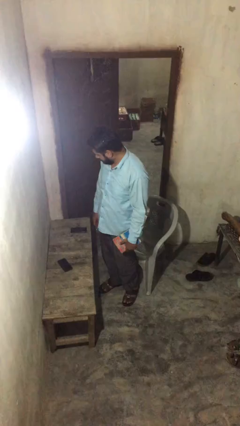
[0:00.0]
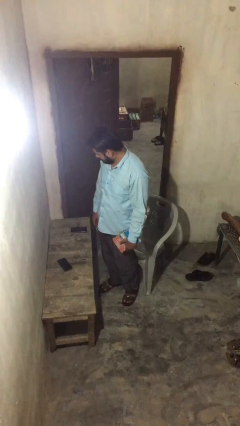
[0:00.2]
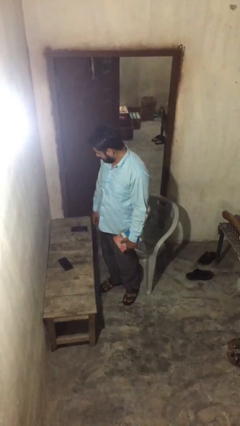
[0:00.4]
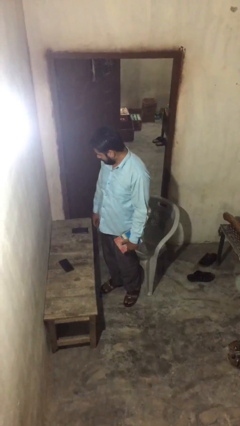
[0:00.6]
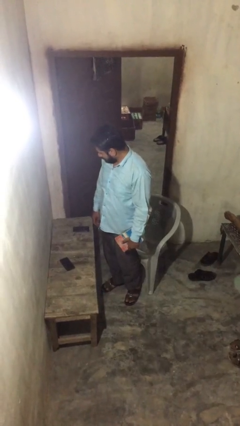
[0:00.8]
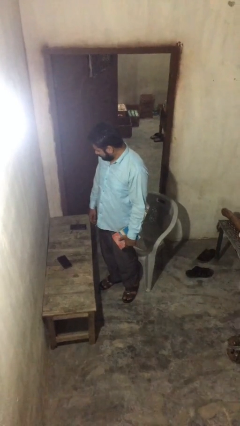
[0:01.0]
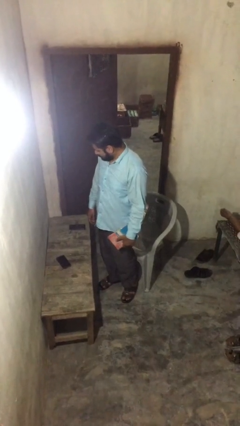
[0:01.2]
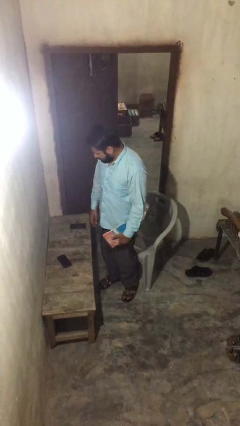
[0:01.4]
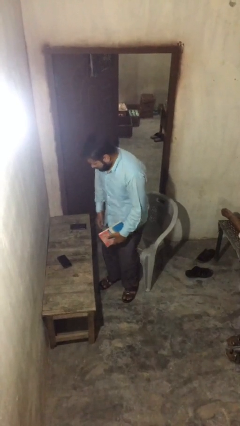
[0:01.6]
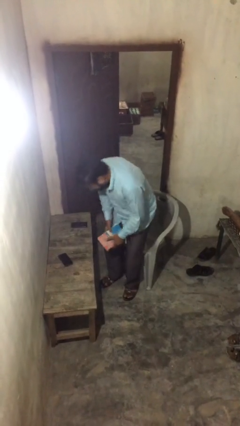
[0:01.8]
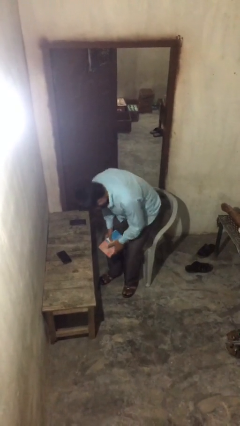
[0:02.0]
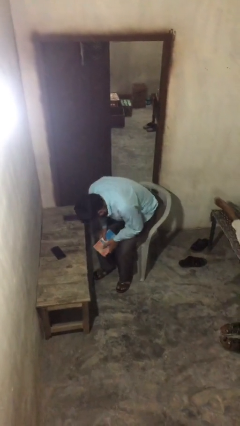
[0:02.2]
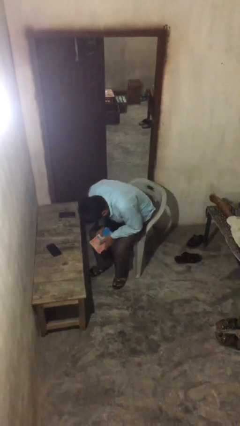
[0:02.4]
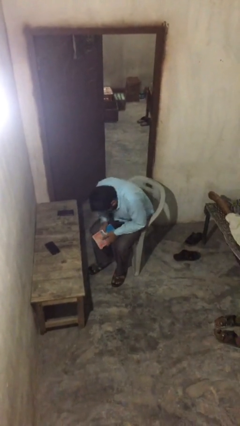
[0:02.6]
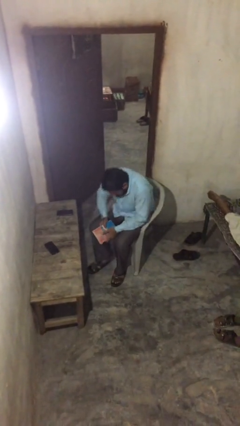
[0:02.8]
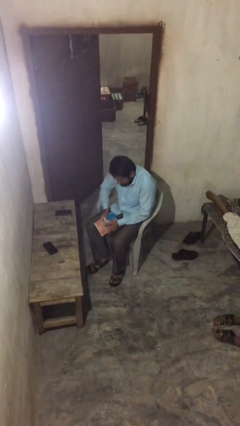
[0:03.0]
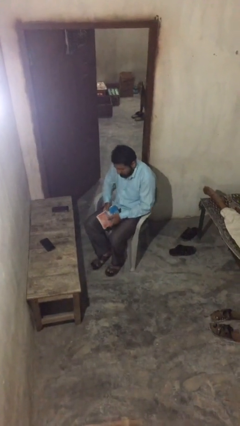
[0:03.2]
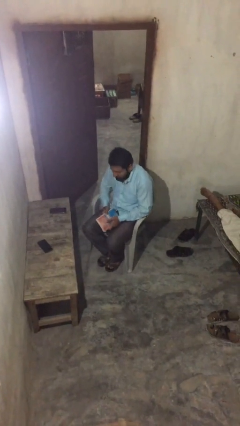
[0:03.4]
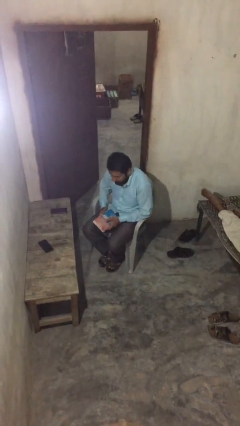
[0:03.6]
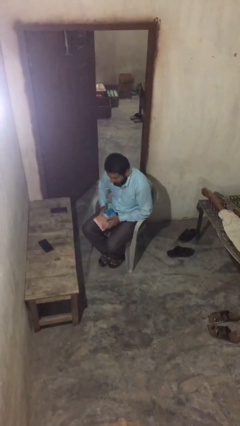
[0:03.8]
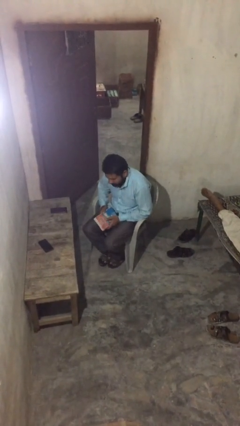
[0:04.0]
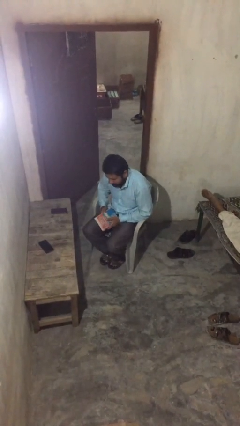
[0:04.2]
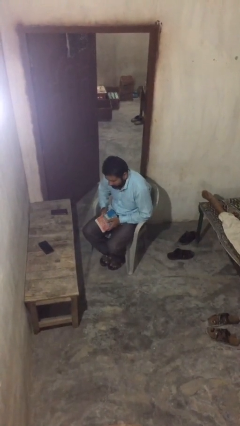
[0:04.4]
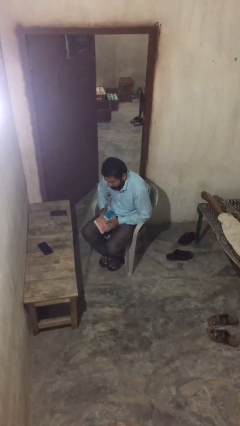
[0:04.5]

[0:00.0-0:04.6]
person sits down

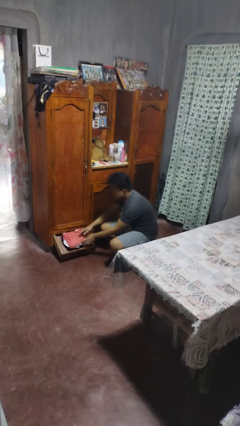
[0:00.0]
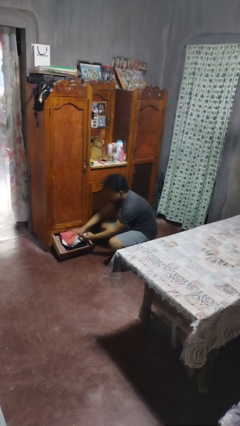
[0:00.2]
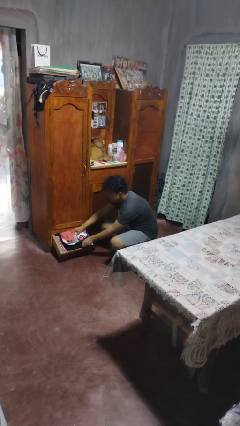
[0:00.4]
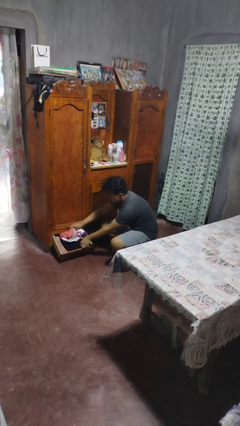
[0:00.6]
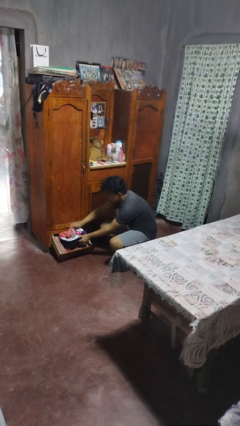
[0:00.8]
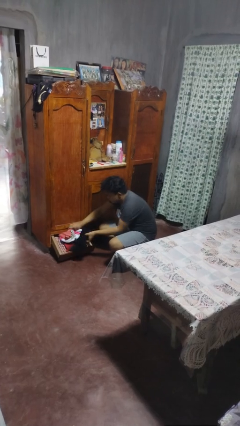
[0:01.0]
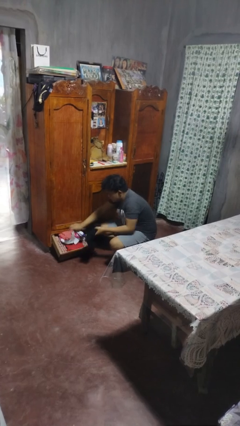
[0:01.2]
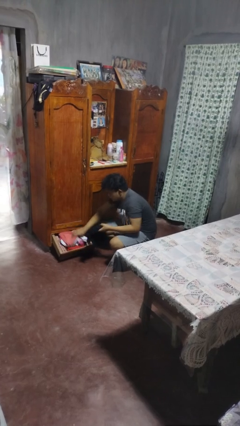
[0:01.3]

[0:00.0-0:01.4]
person takes clothes from dresser

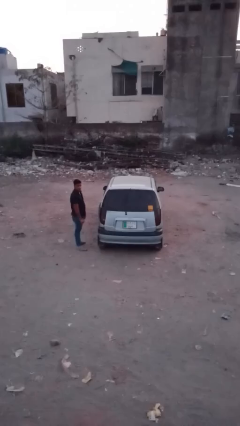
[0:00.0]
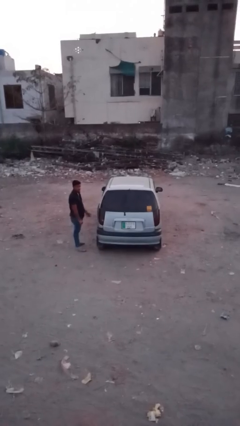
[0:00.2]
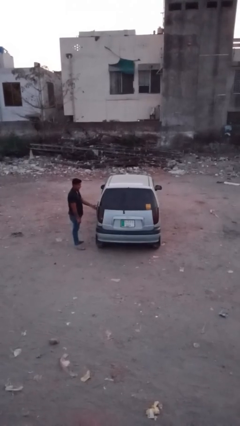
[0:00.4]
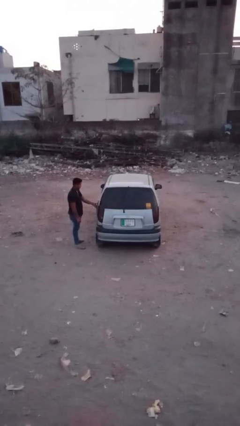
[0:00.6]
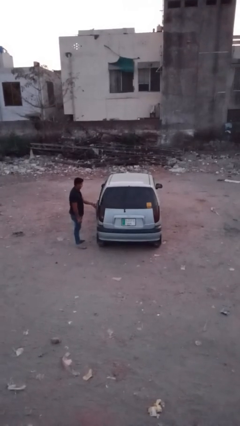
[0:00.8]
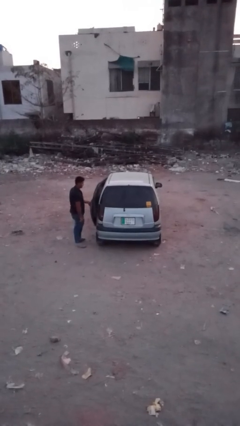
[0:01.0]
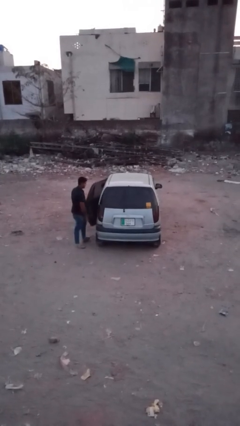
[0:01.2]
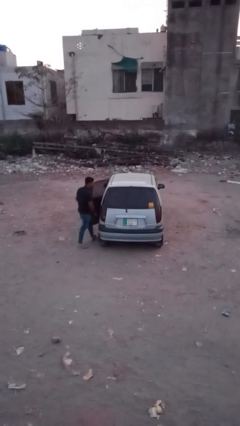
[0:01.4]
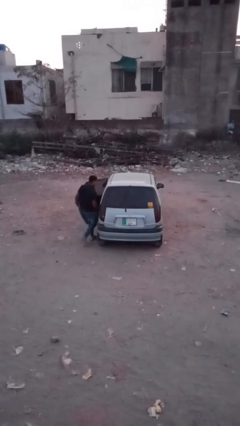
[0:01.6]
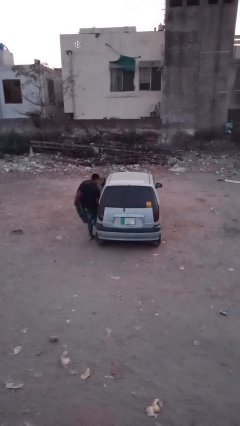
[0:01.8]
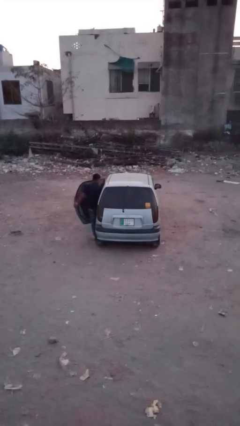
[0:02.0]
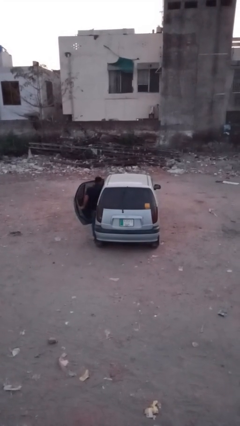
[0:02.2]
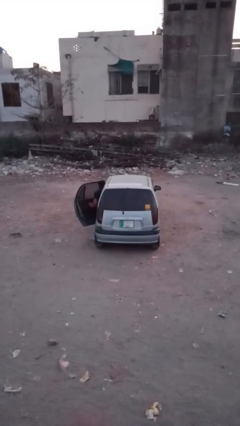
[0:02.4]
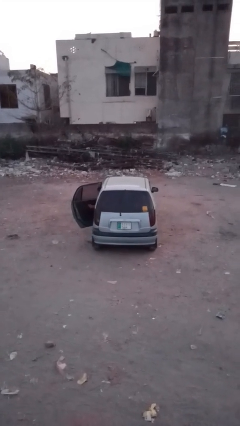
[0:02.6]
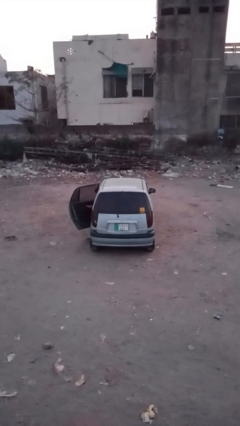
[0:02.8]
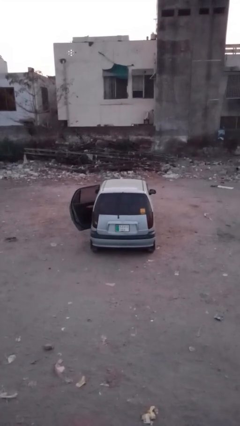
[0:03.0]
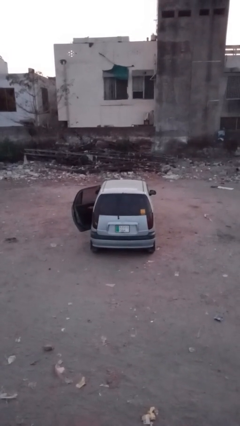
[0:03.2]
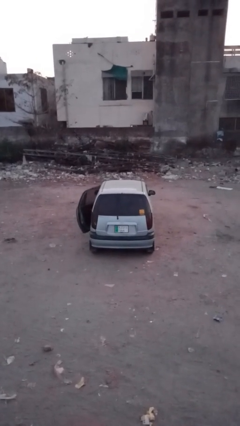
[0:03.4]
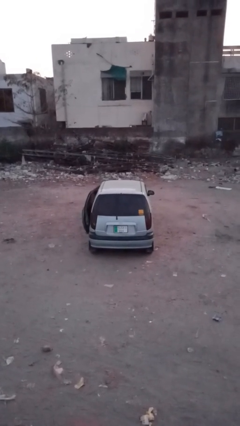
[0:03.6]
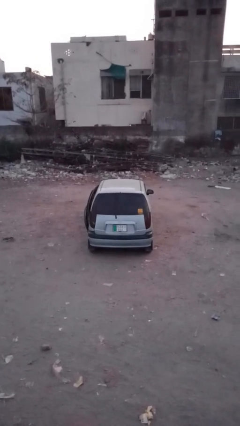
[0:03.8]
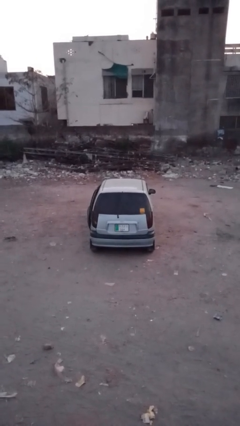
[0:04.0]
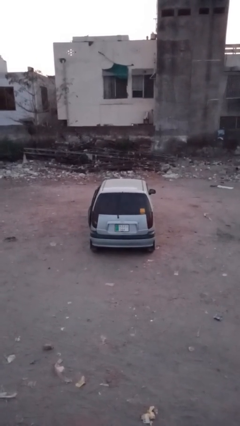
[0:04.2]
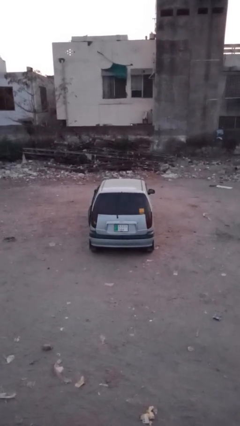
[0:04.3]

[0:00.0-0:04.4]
car picks up person

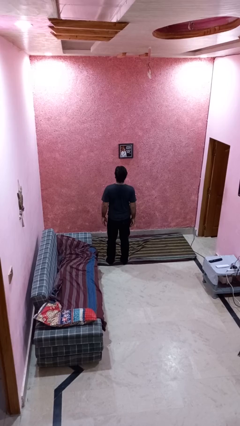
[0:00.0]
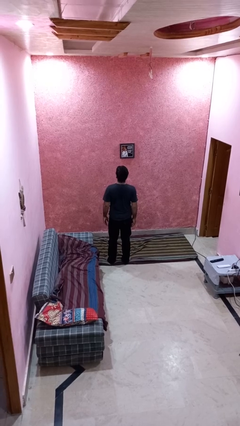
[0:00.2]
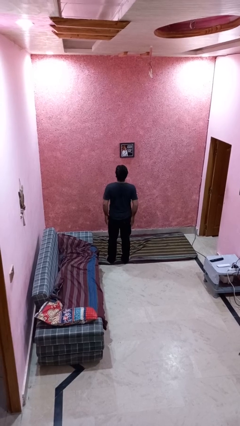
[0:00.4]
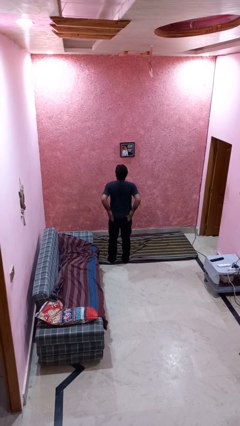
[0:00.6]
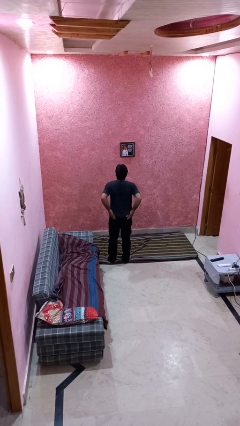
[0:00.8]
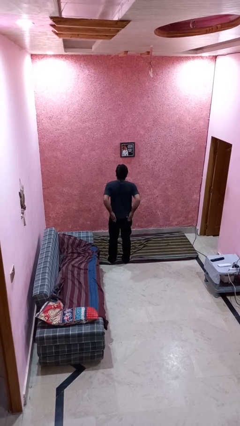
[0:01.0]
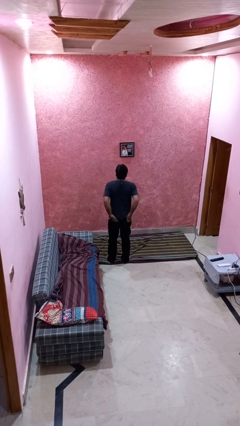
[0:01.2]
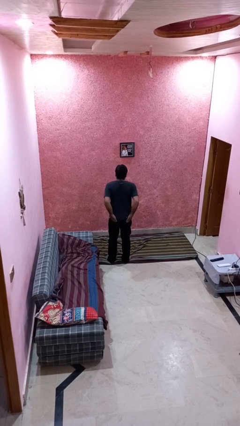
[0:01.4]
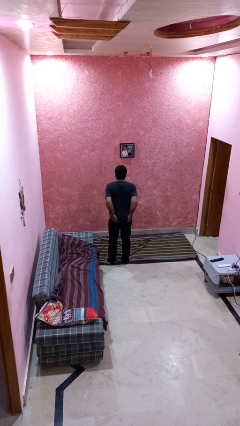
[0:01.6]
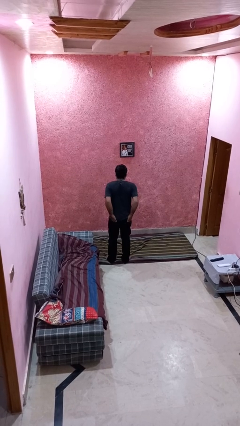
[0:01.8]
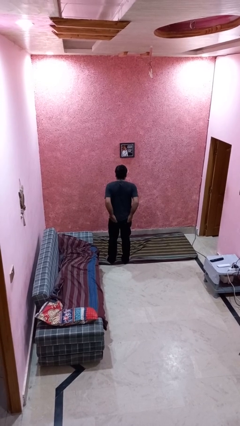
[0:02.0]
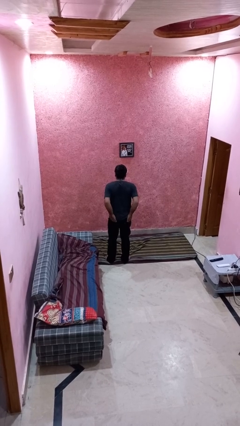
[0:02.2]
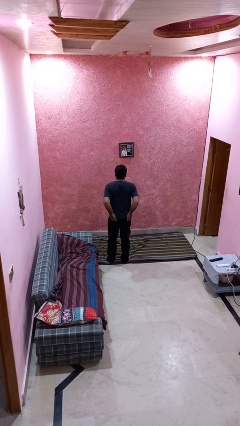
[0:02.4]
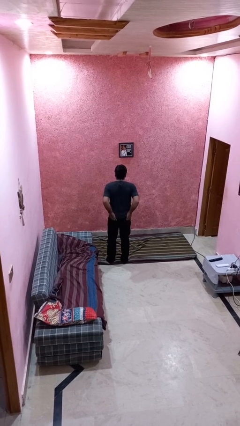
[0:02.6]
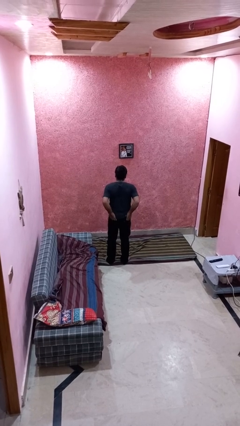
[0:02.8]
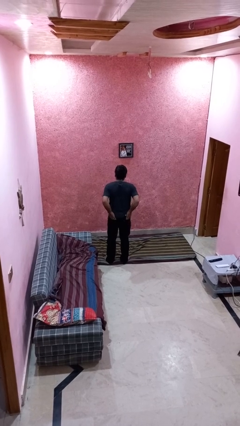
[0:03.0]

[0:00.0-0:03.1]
person puts hands in back pockets

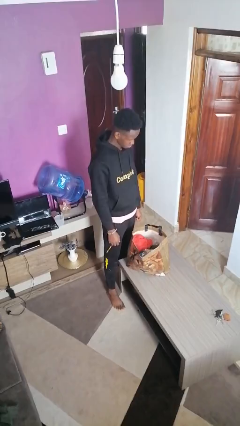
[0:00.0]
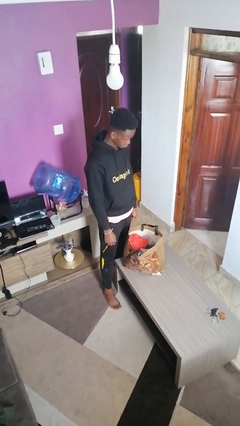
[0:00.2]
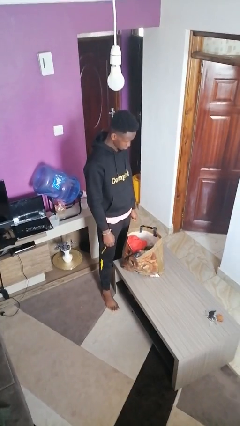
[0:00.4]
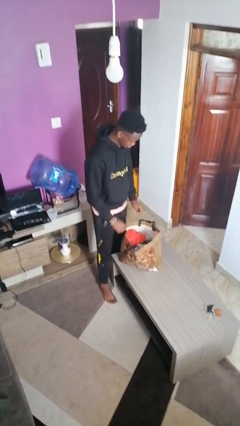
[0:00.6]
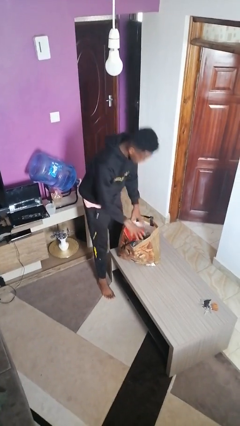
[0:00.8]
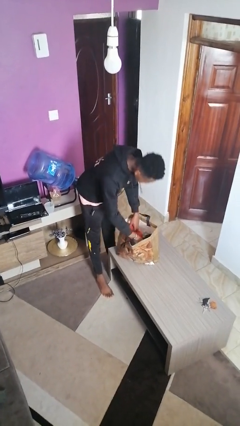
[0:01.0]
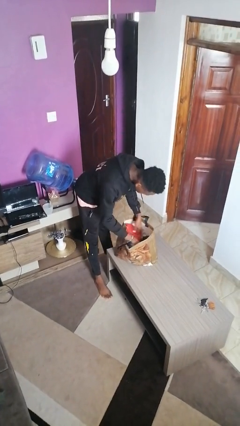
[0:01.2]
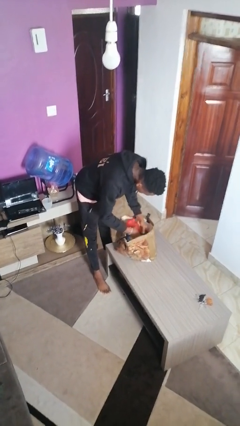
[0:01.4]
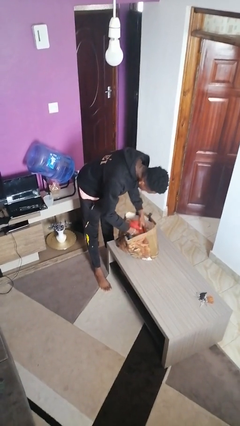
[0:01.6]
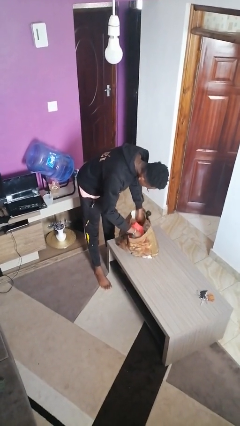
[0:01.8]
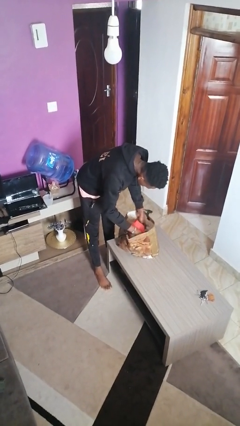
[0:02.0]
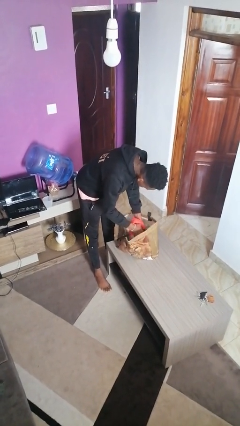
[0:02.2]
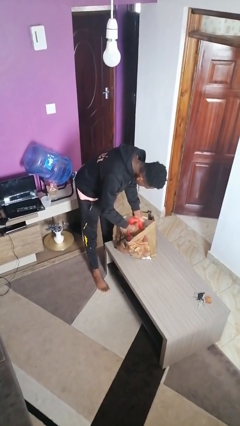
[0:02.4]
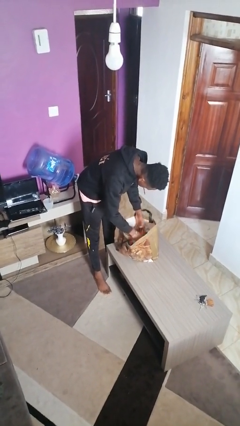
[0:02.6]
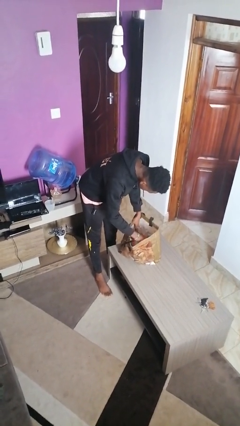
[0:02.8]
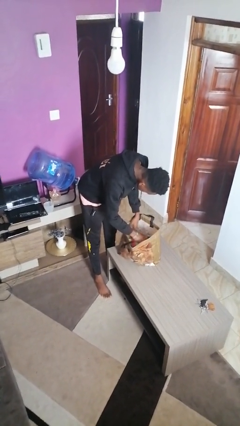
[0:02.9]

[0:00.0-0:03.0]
person searches in bag

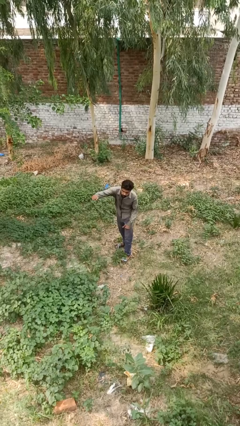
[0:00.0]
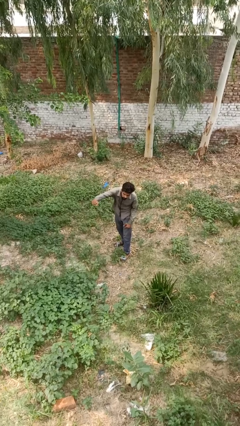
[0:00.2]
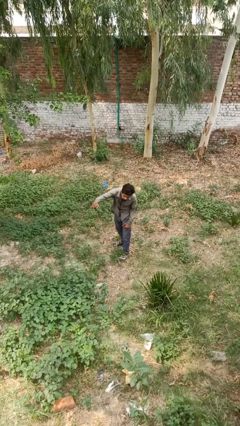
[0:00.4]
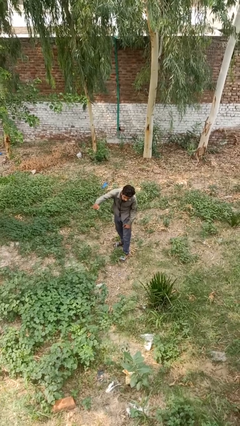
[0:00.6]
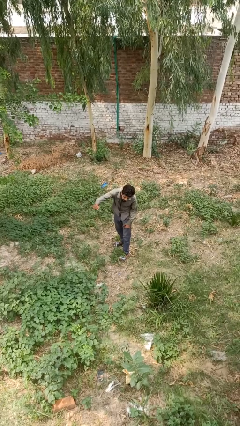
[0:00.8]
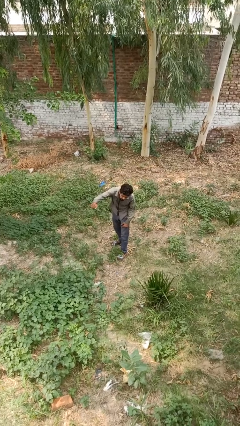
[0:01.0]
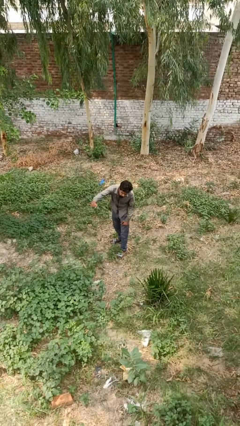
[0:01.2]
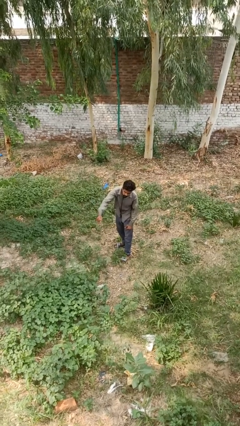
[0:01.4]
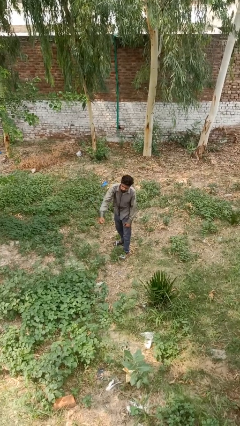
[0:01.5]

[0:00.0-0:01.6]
person punches
